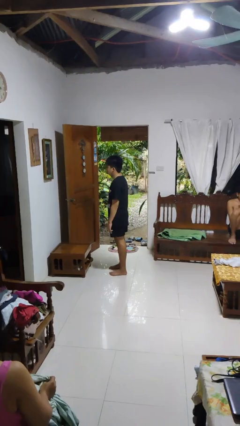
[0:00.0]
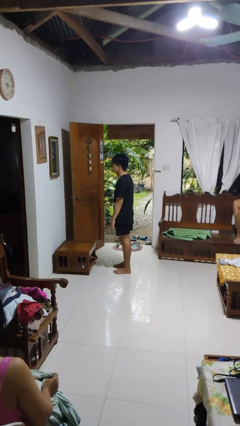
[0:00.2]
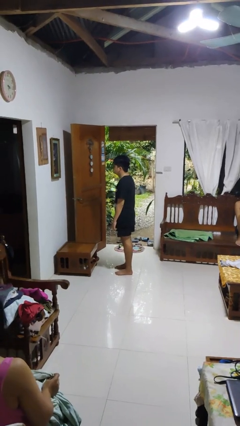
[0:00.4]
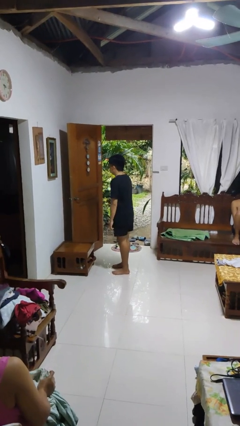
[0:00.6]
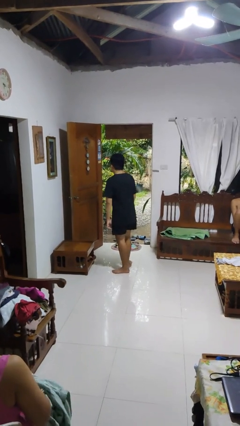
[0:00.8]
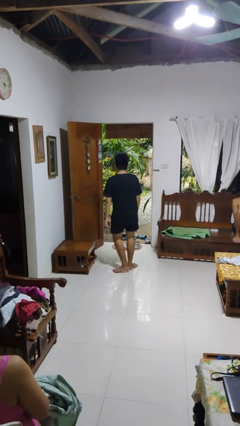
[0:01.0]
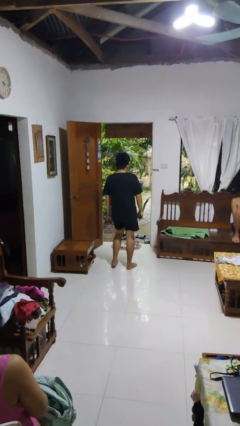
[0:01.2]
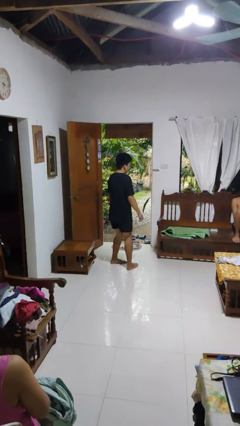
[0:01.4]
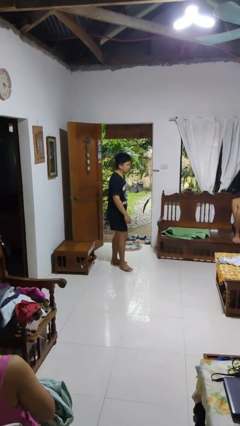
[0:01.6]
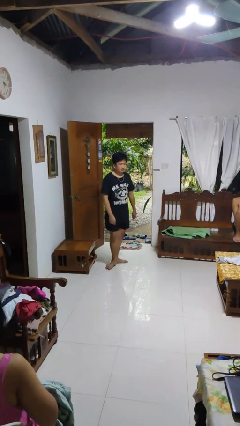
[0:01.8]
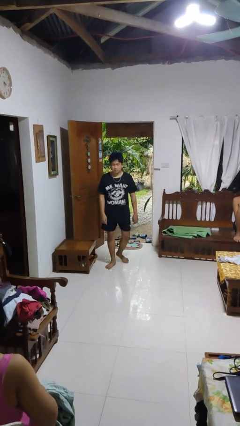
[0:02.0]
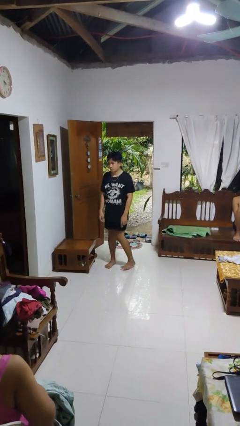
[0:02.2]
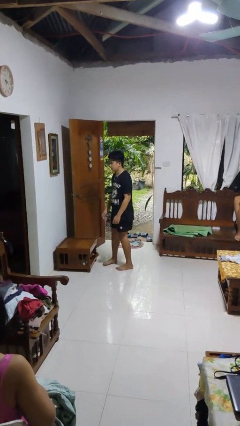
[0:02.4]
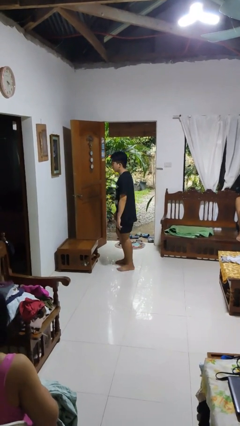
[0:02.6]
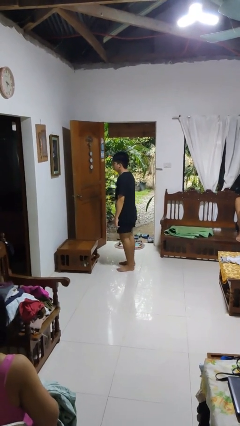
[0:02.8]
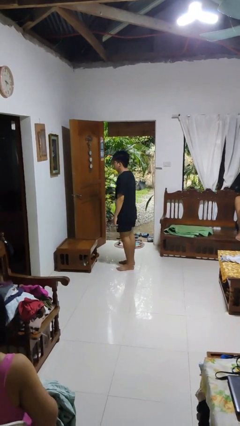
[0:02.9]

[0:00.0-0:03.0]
person twirls

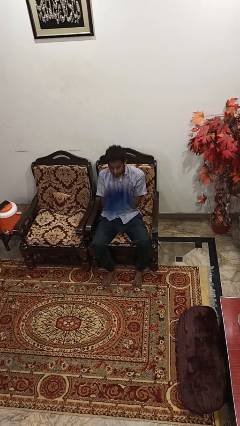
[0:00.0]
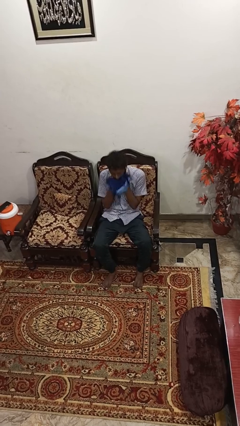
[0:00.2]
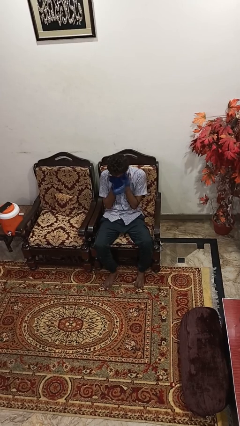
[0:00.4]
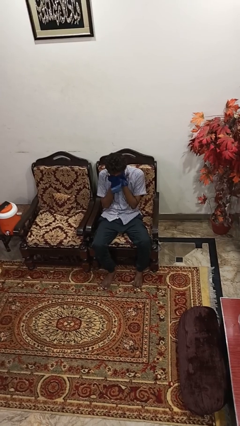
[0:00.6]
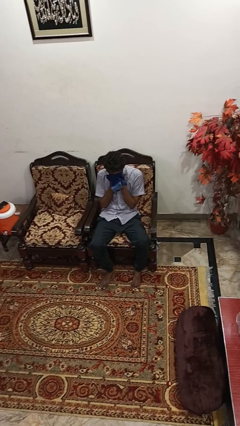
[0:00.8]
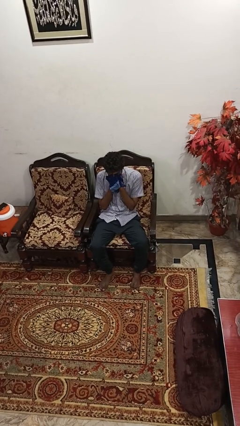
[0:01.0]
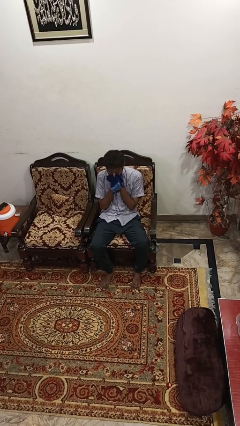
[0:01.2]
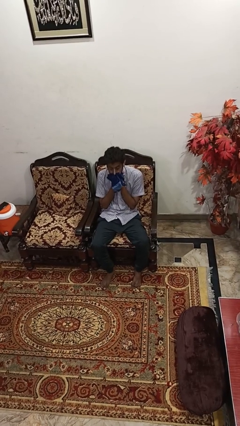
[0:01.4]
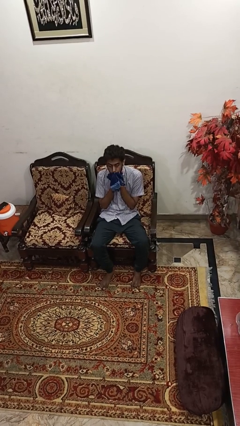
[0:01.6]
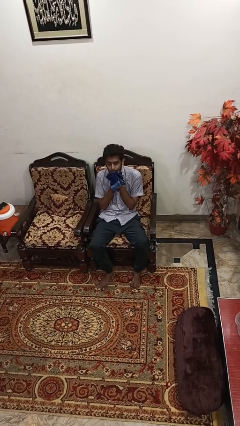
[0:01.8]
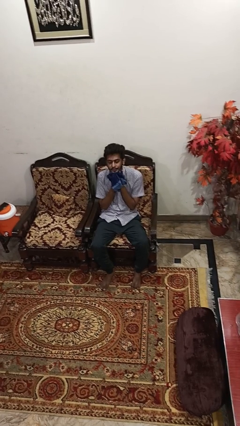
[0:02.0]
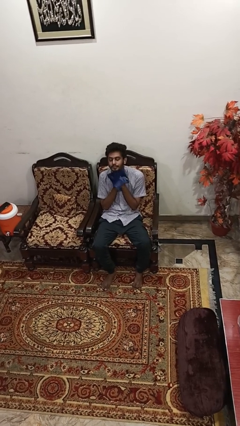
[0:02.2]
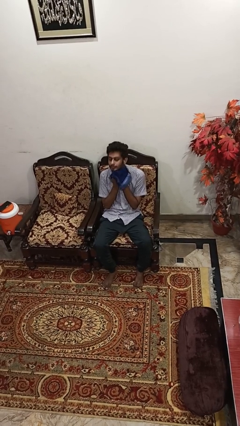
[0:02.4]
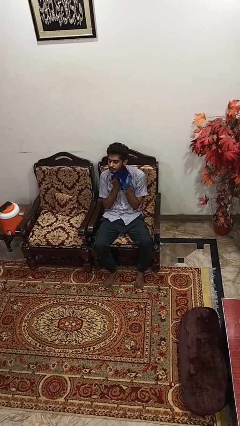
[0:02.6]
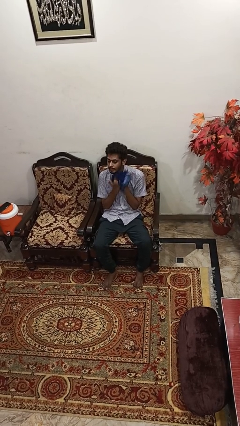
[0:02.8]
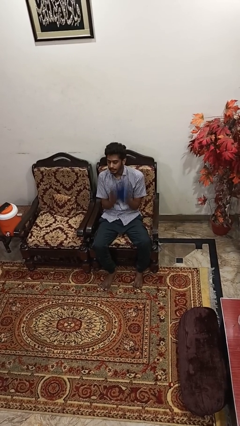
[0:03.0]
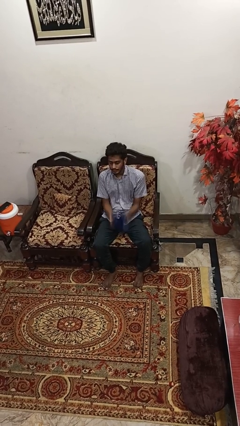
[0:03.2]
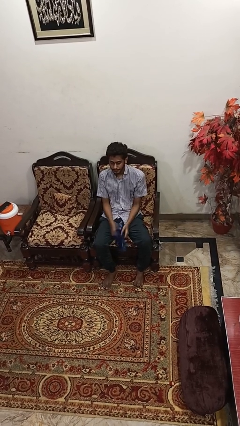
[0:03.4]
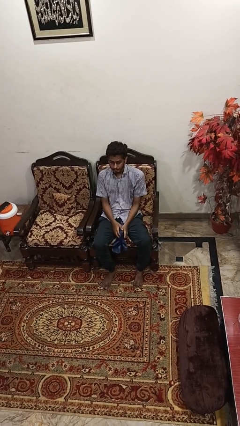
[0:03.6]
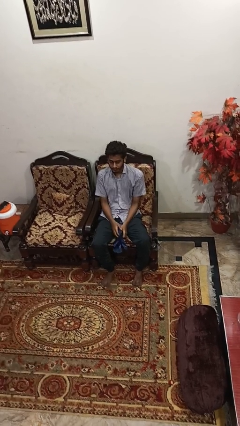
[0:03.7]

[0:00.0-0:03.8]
person wipes mouth with napkin

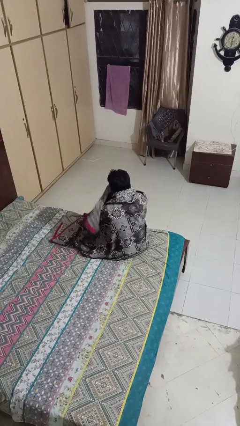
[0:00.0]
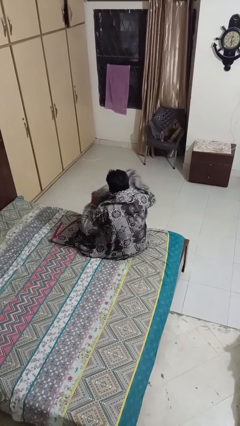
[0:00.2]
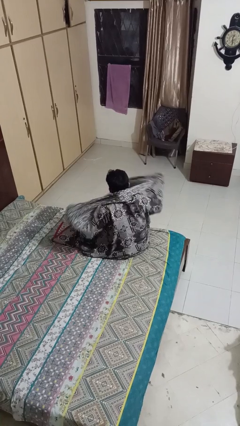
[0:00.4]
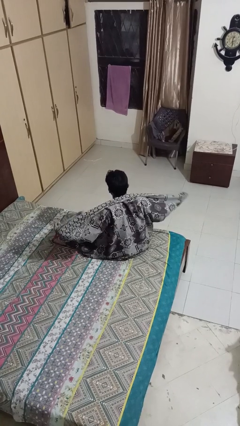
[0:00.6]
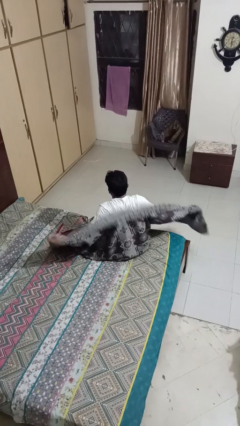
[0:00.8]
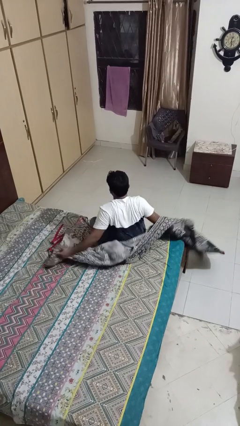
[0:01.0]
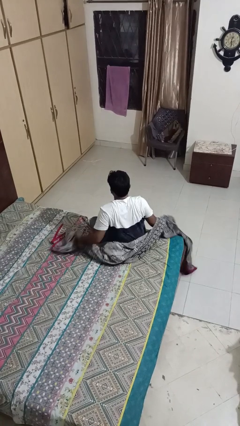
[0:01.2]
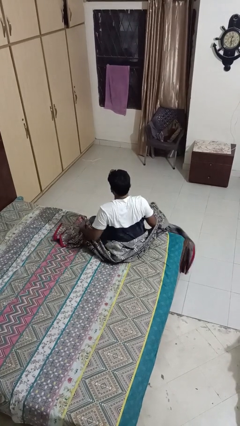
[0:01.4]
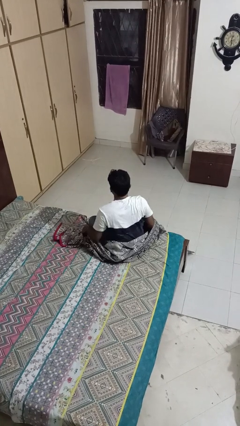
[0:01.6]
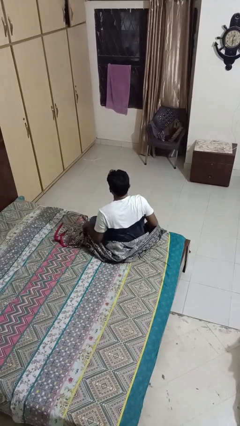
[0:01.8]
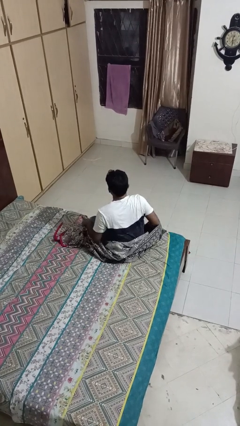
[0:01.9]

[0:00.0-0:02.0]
person uncovers with blanket

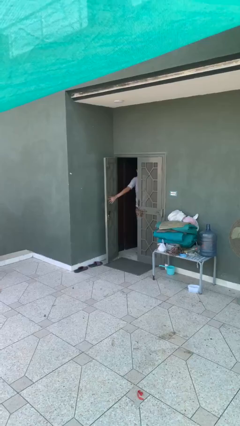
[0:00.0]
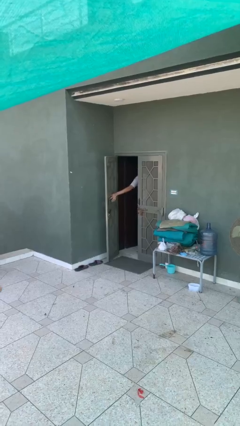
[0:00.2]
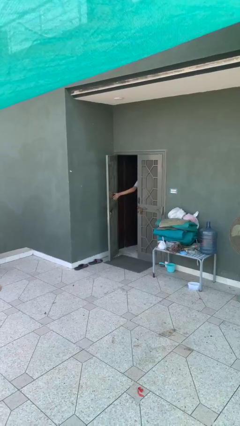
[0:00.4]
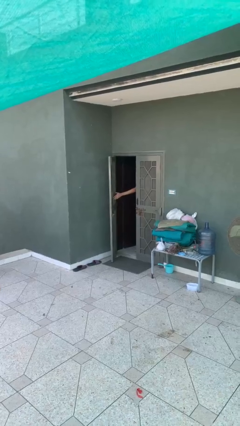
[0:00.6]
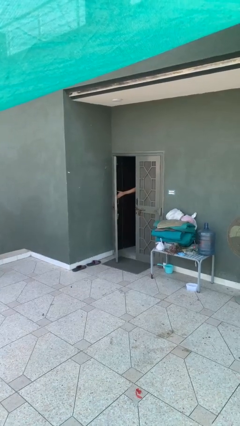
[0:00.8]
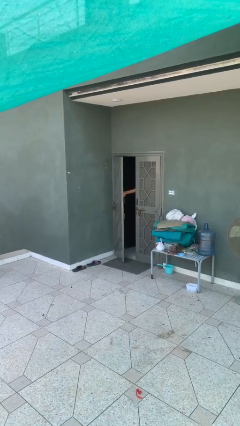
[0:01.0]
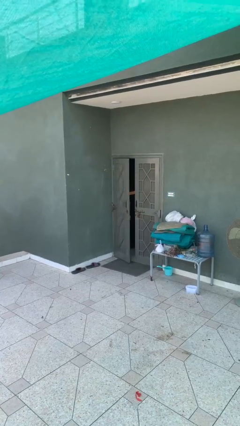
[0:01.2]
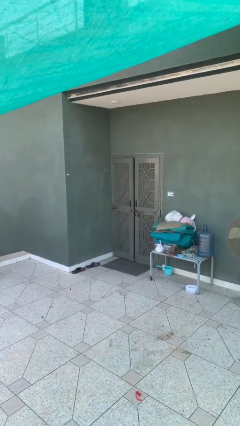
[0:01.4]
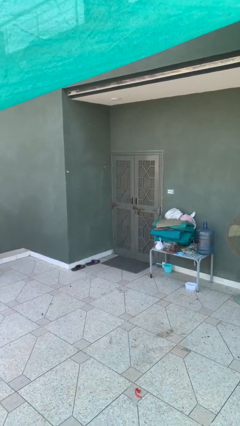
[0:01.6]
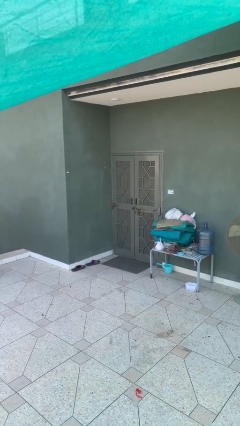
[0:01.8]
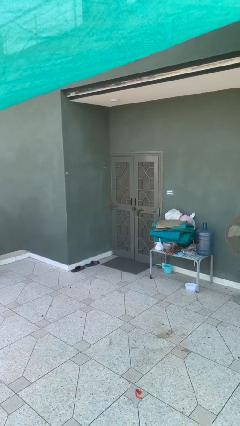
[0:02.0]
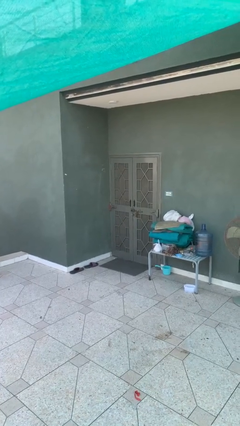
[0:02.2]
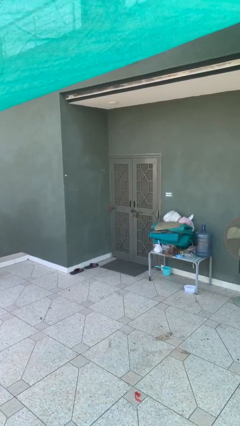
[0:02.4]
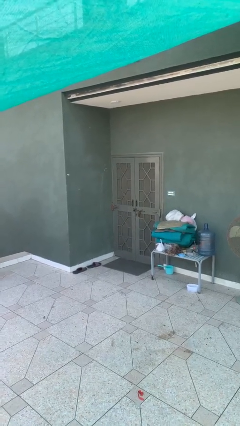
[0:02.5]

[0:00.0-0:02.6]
person closes facility door

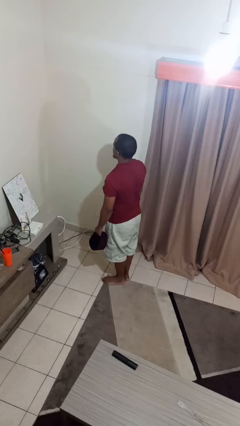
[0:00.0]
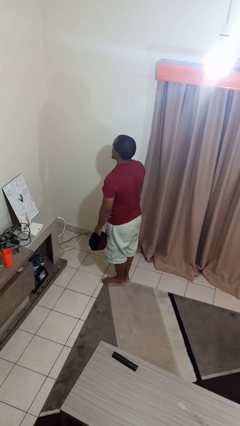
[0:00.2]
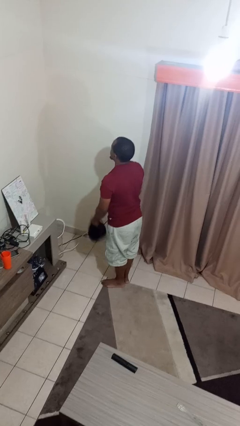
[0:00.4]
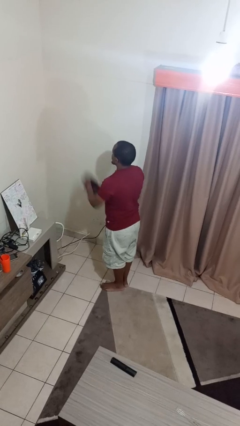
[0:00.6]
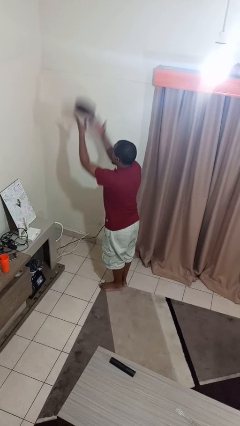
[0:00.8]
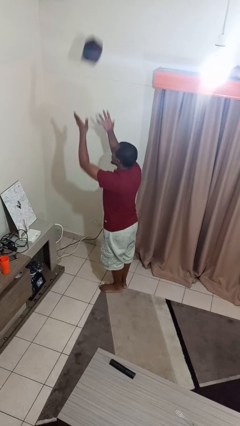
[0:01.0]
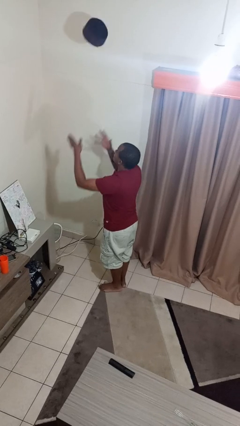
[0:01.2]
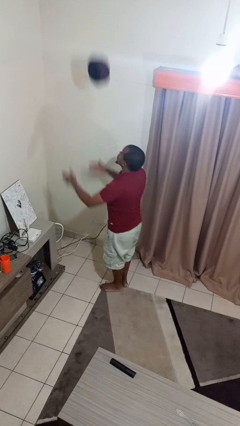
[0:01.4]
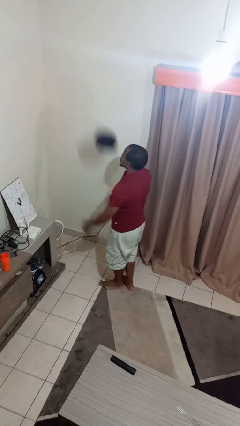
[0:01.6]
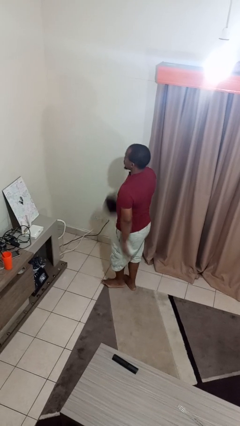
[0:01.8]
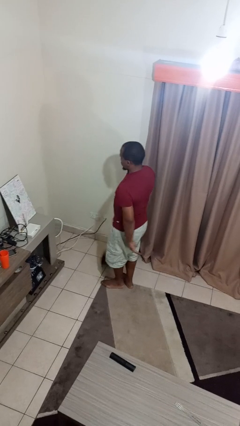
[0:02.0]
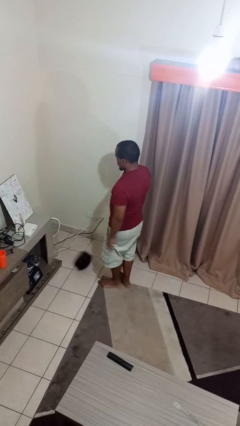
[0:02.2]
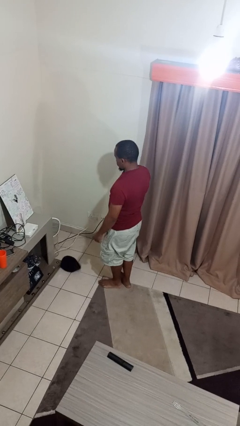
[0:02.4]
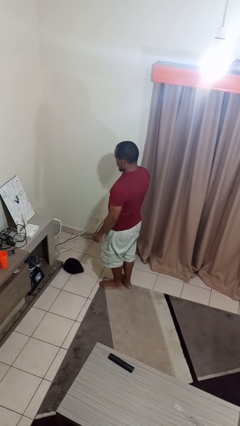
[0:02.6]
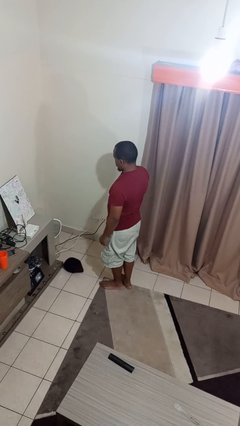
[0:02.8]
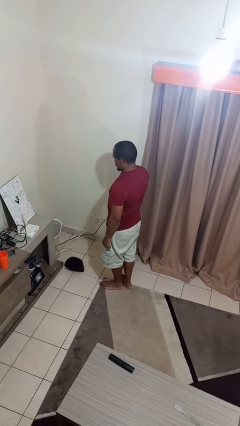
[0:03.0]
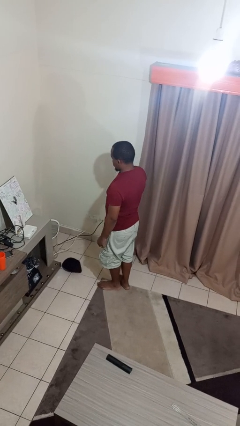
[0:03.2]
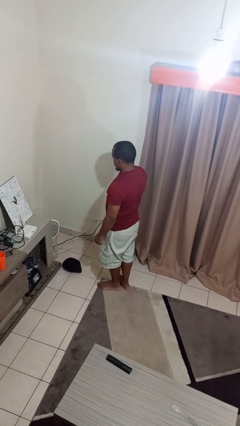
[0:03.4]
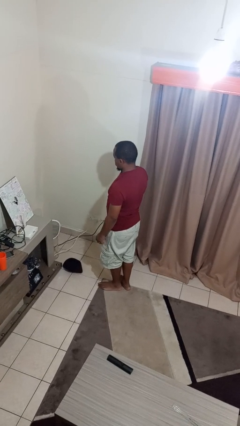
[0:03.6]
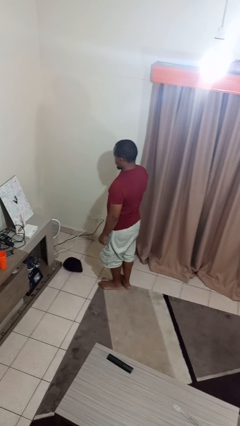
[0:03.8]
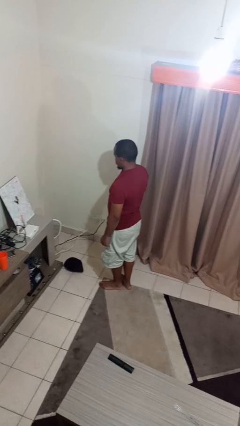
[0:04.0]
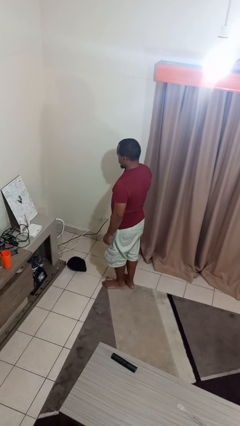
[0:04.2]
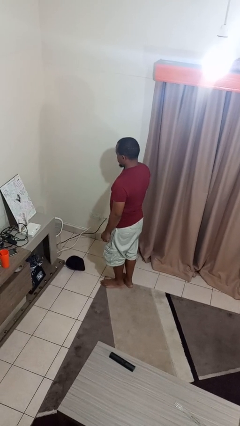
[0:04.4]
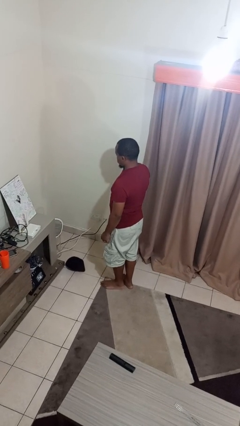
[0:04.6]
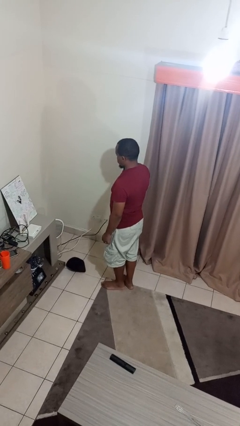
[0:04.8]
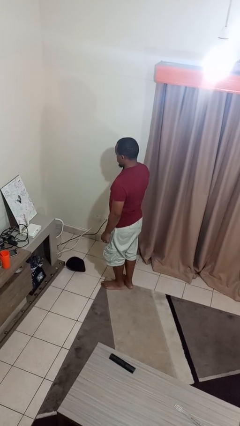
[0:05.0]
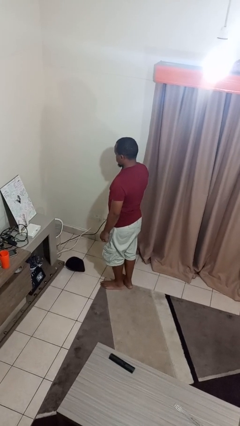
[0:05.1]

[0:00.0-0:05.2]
person throws object into air

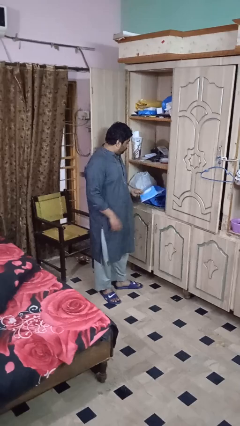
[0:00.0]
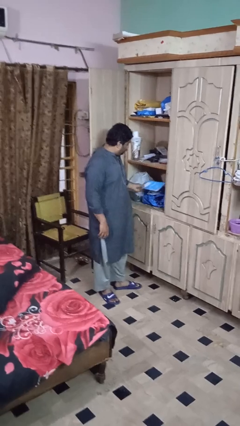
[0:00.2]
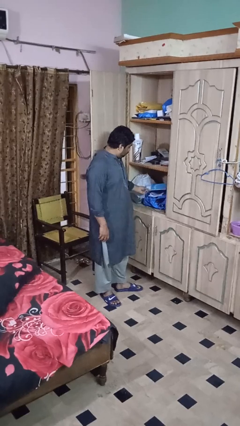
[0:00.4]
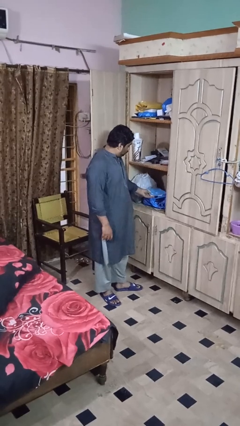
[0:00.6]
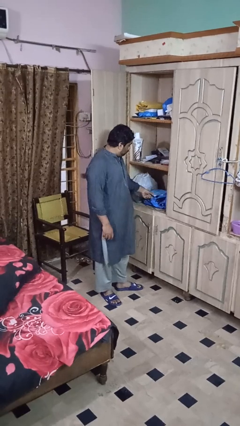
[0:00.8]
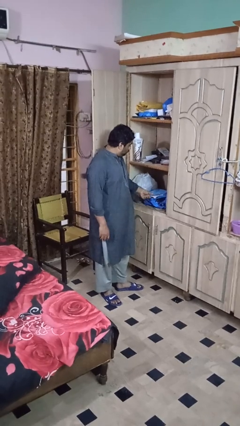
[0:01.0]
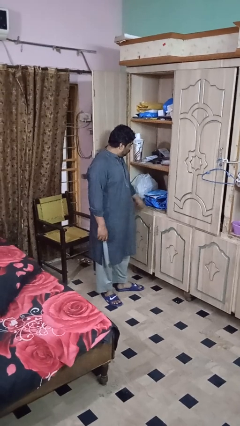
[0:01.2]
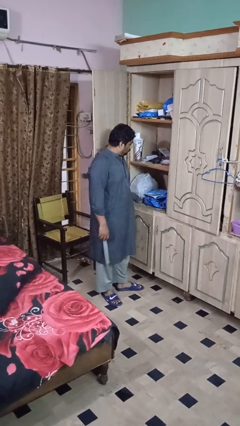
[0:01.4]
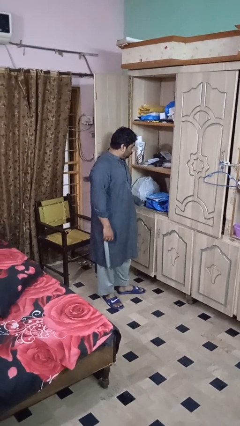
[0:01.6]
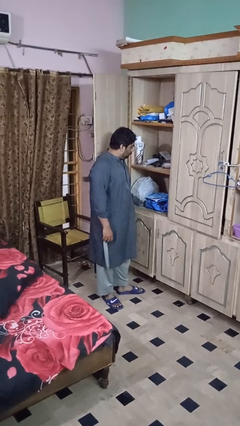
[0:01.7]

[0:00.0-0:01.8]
person puts down object on shelf
